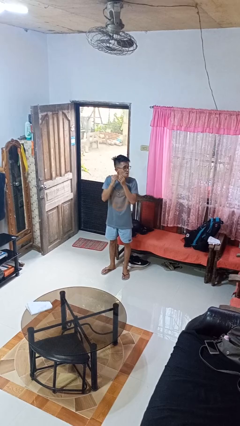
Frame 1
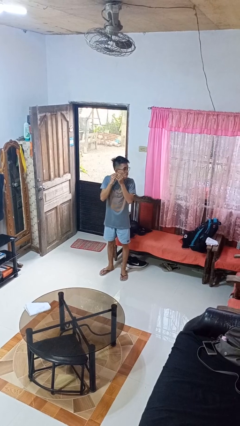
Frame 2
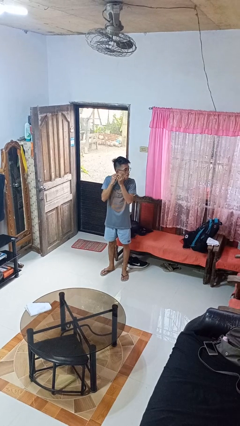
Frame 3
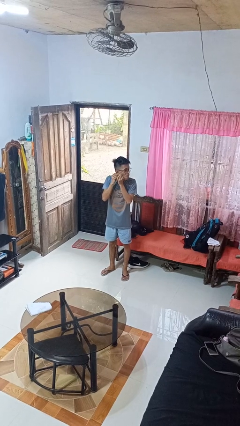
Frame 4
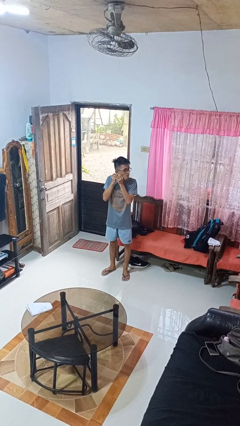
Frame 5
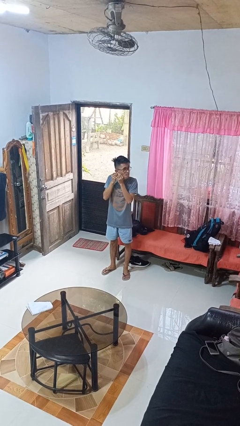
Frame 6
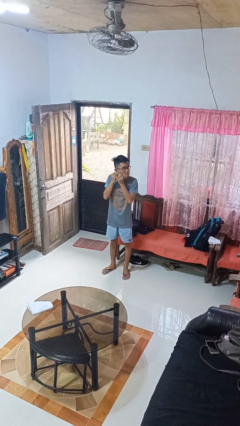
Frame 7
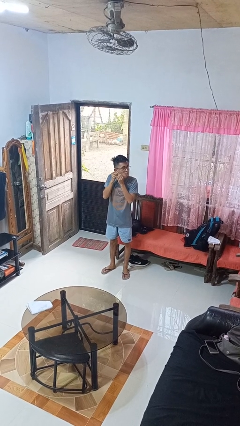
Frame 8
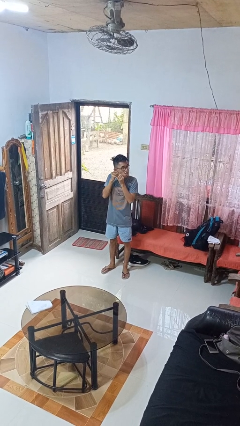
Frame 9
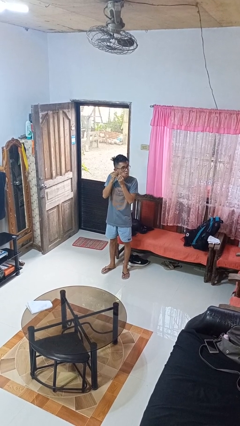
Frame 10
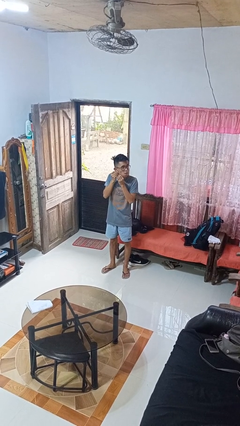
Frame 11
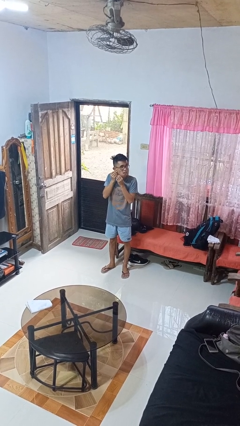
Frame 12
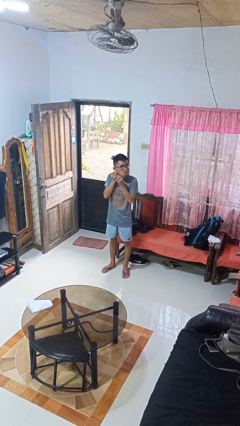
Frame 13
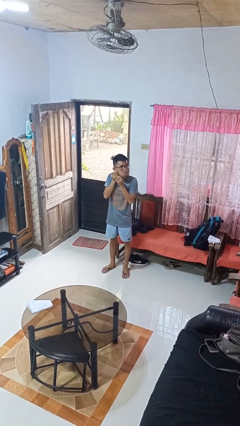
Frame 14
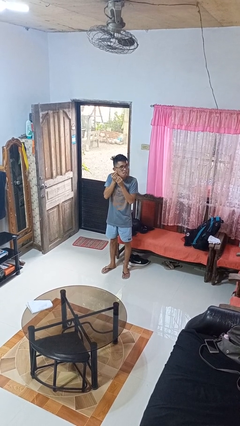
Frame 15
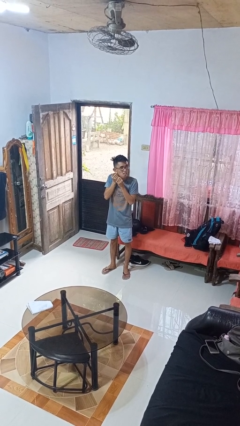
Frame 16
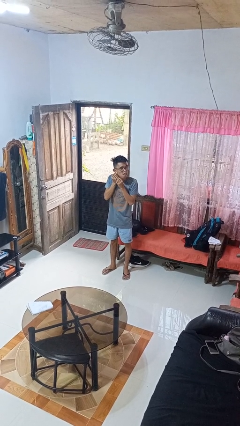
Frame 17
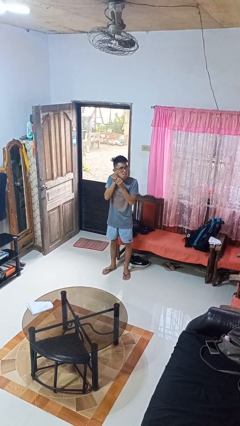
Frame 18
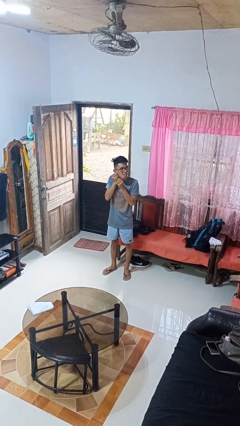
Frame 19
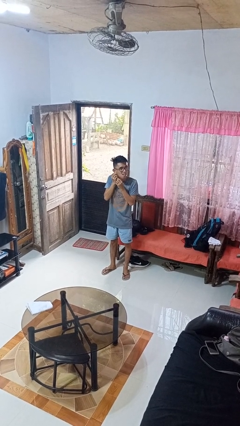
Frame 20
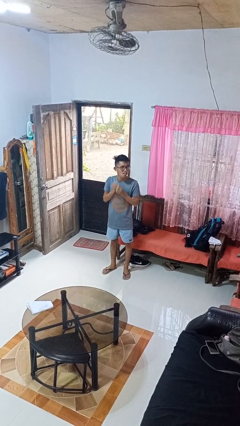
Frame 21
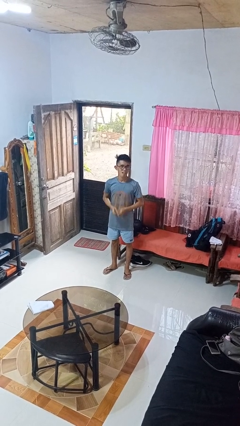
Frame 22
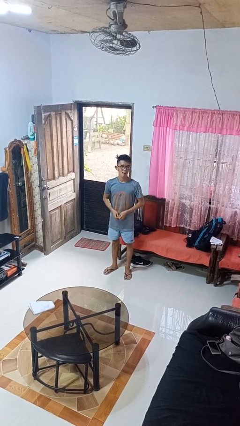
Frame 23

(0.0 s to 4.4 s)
person puts on earrings

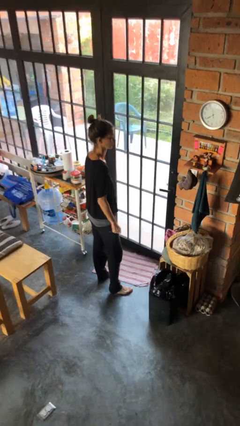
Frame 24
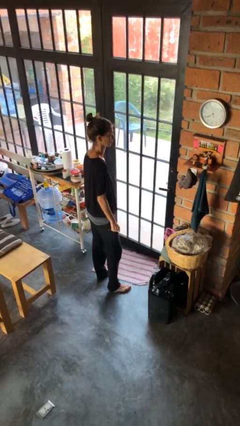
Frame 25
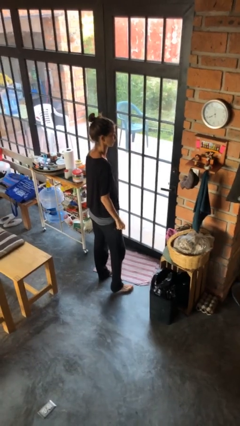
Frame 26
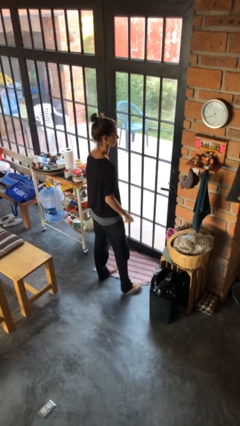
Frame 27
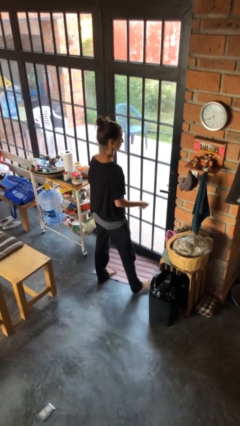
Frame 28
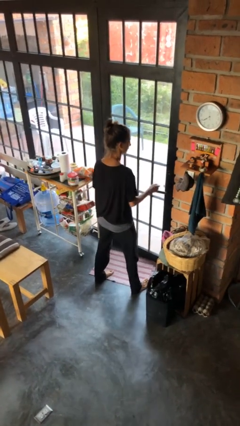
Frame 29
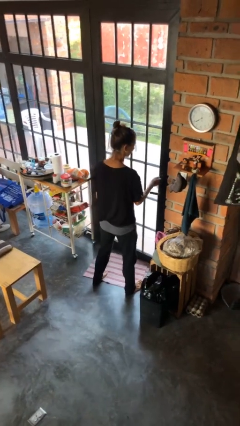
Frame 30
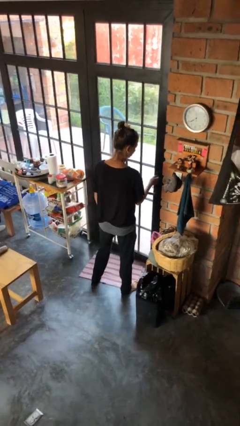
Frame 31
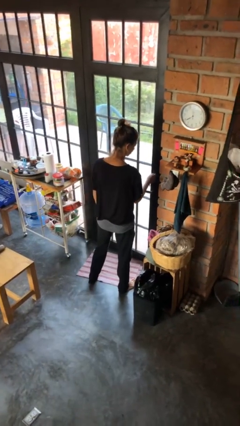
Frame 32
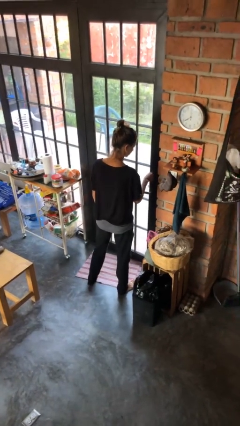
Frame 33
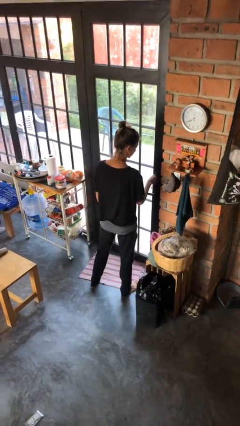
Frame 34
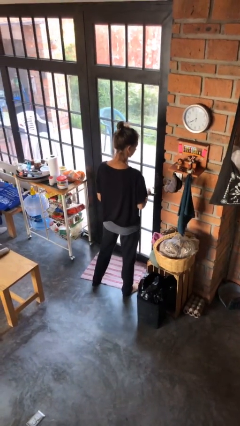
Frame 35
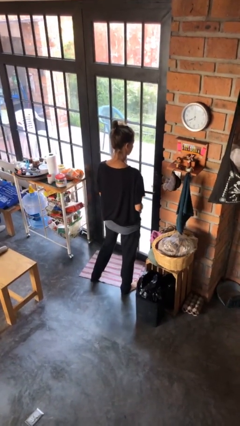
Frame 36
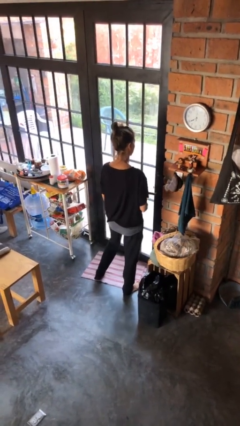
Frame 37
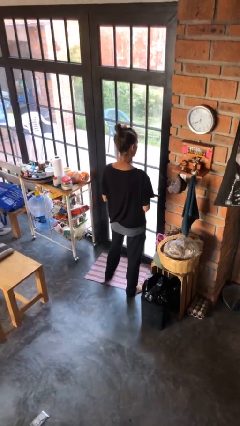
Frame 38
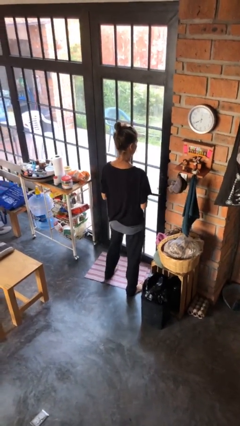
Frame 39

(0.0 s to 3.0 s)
person unlocks door with keys

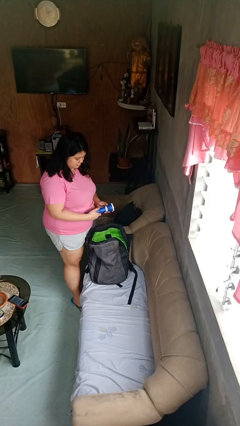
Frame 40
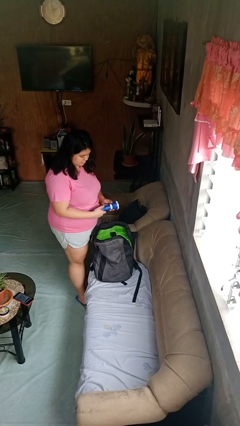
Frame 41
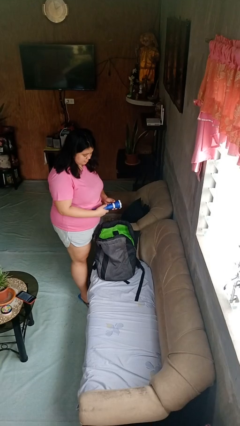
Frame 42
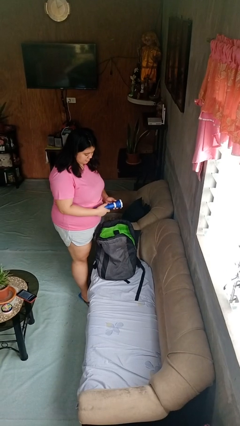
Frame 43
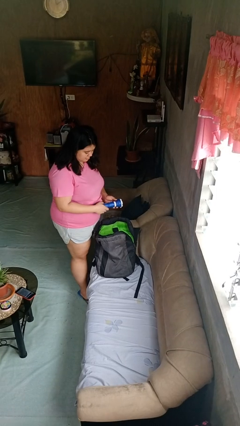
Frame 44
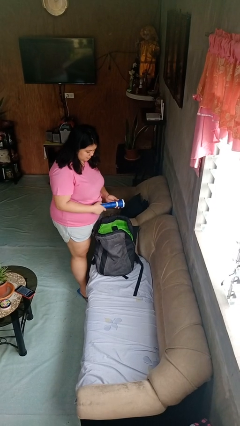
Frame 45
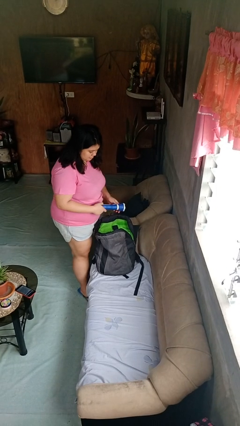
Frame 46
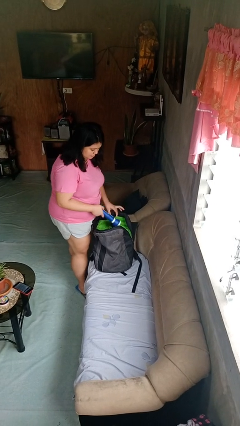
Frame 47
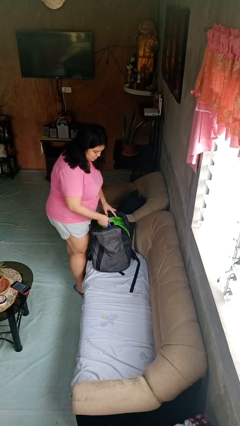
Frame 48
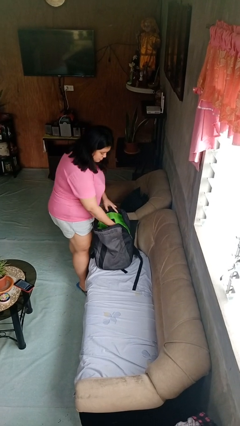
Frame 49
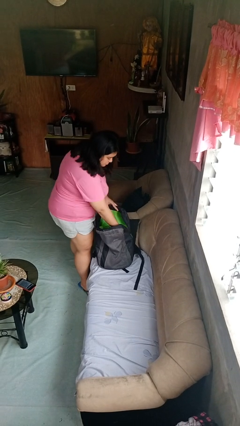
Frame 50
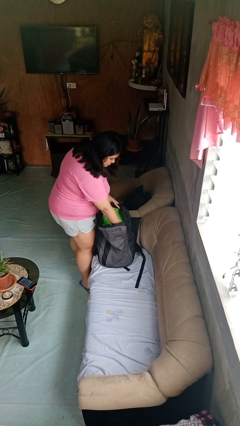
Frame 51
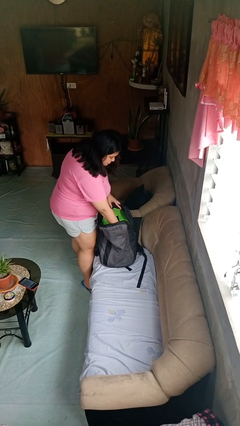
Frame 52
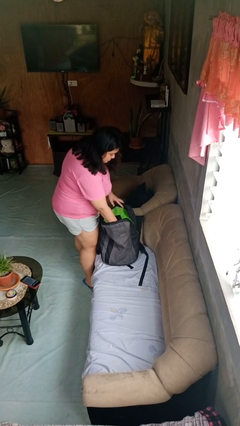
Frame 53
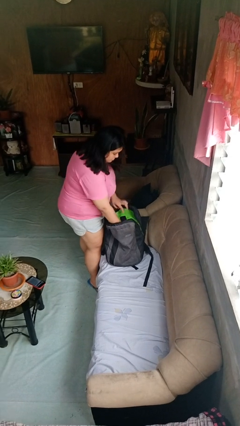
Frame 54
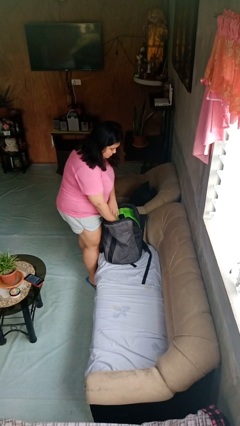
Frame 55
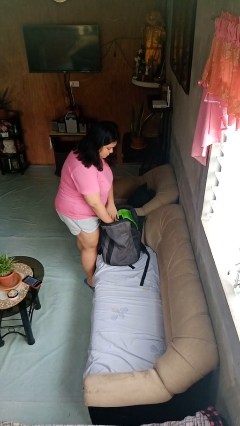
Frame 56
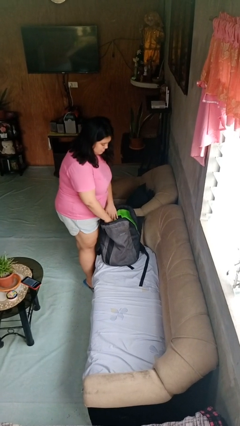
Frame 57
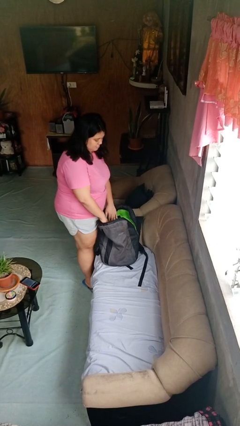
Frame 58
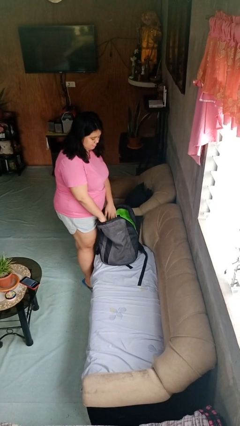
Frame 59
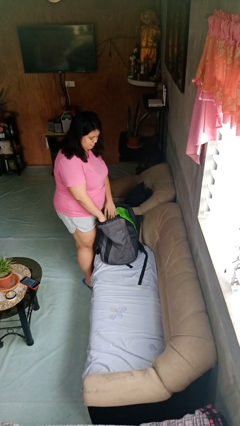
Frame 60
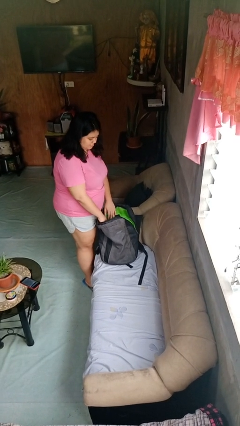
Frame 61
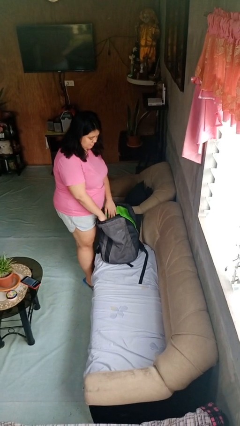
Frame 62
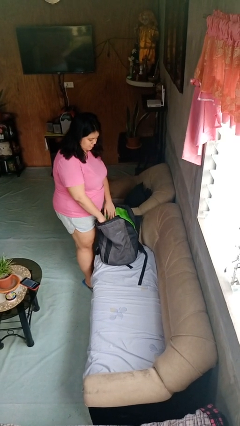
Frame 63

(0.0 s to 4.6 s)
person puts object into backpack

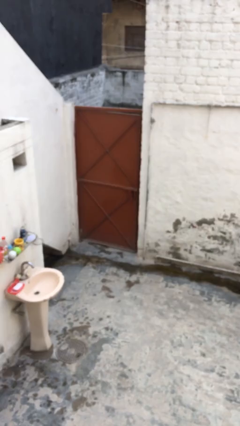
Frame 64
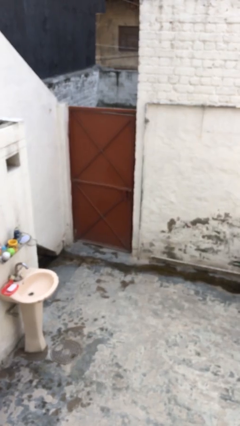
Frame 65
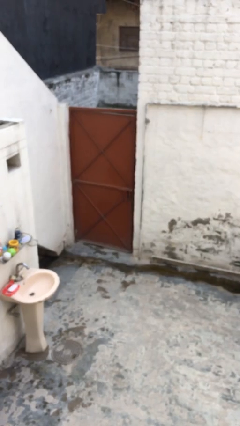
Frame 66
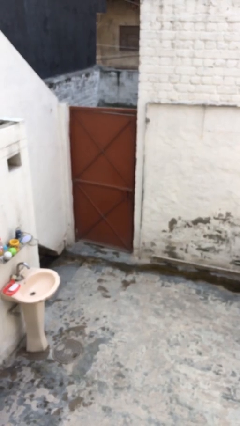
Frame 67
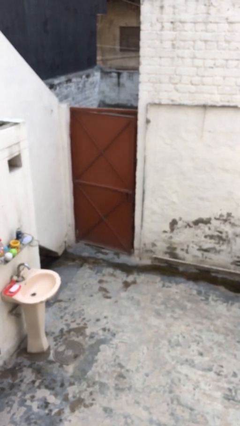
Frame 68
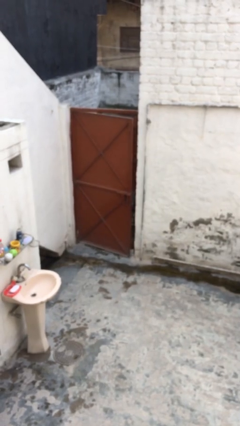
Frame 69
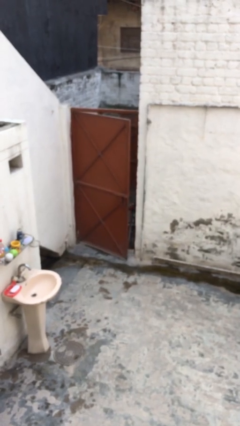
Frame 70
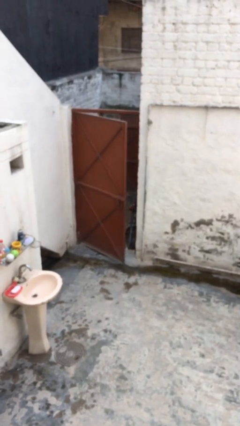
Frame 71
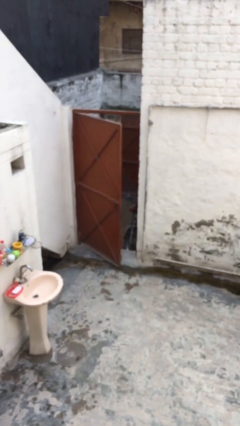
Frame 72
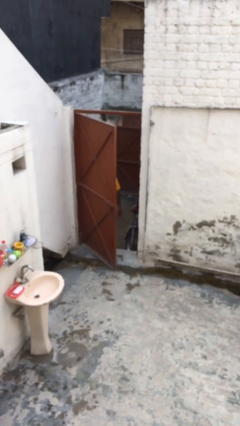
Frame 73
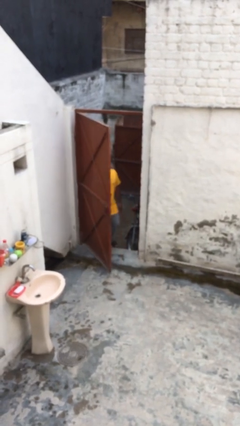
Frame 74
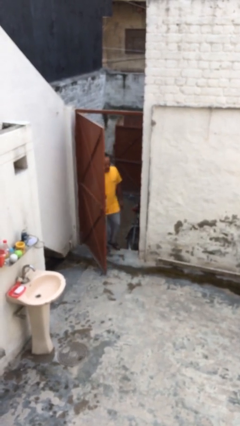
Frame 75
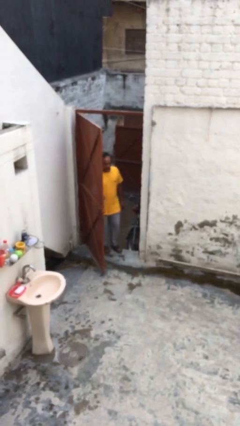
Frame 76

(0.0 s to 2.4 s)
person opens facility door

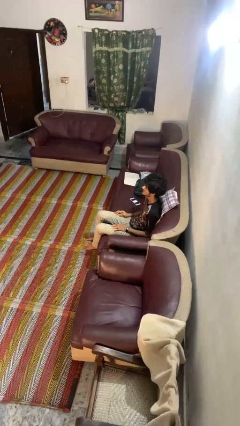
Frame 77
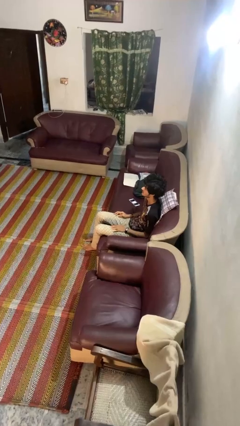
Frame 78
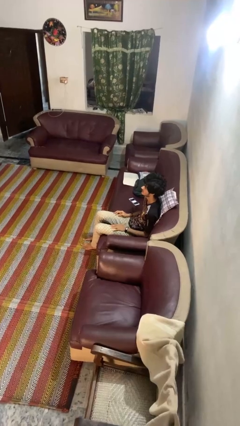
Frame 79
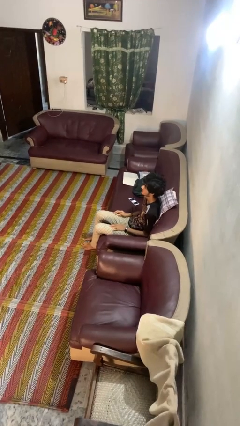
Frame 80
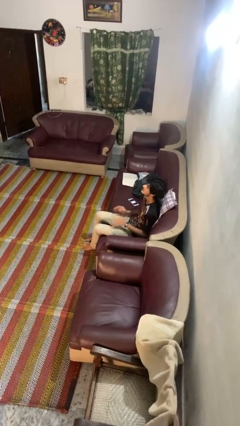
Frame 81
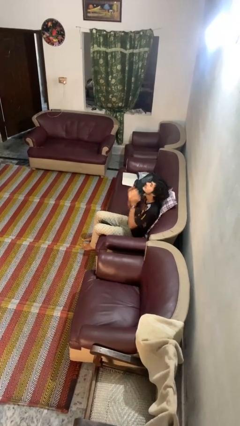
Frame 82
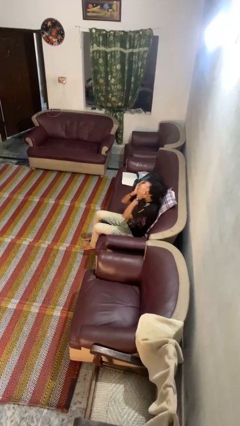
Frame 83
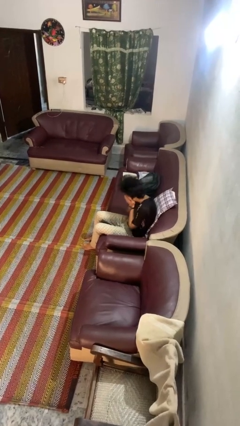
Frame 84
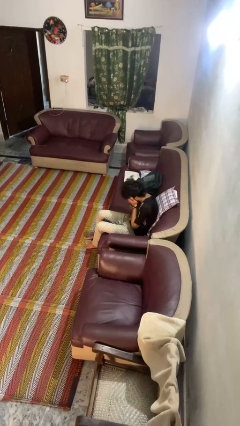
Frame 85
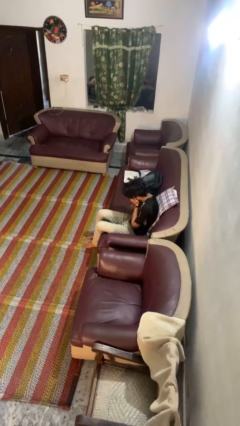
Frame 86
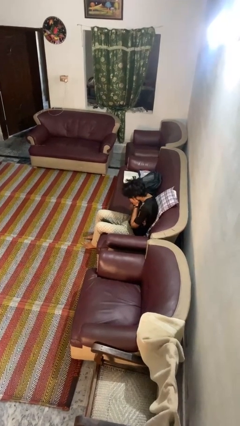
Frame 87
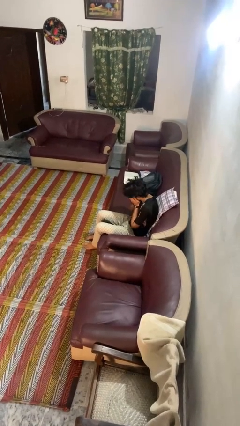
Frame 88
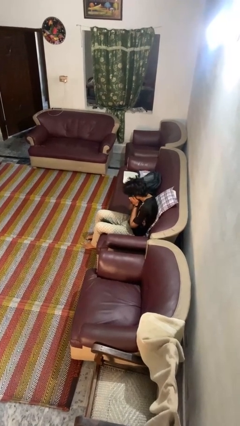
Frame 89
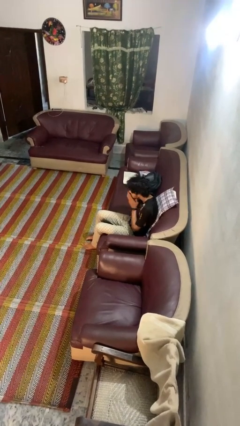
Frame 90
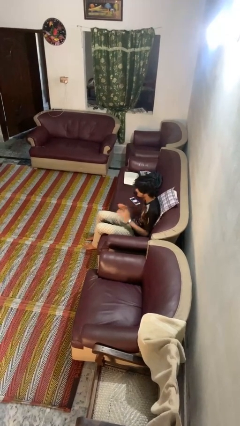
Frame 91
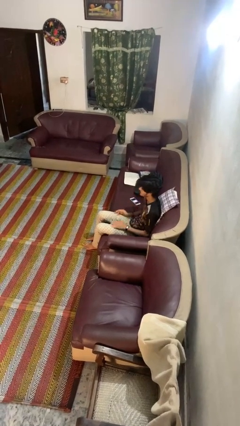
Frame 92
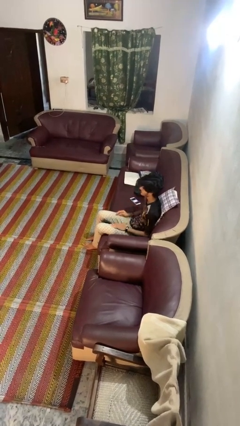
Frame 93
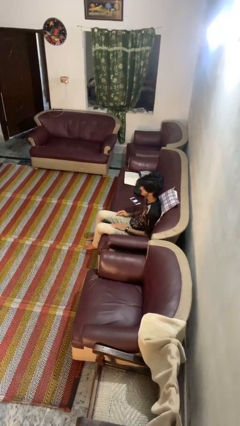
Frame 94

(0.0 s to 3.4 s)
person sneezes into hand
